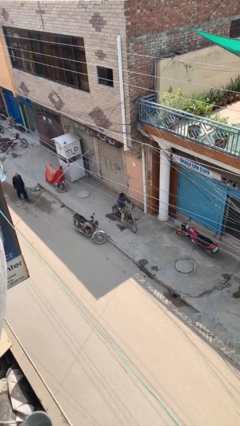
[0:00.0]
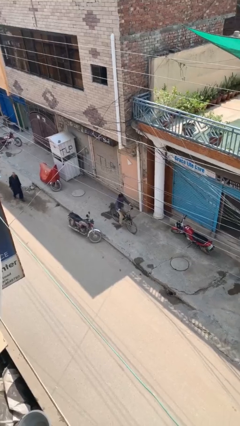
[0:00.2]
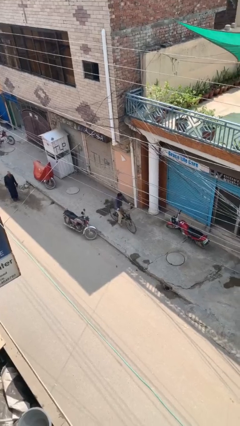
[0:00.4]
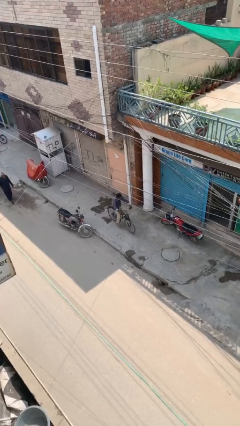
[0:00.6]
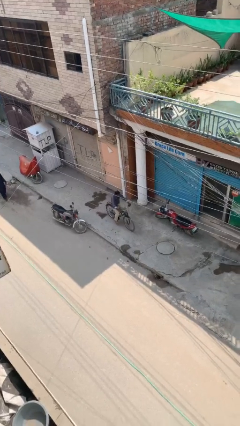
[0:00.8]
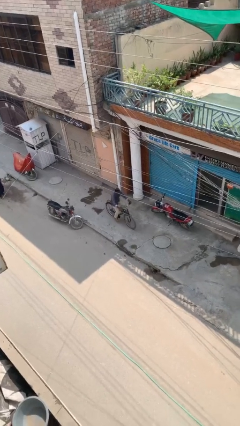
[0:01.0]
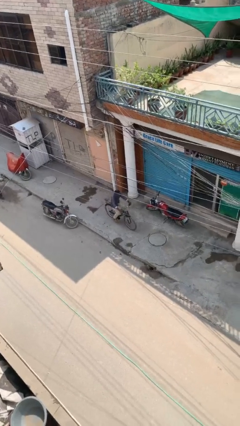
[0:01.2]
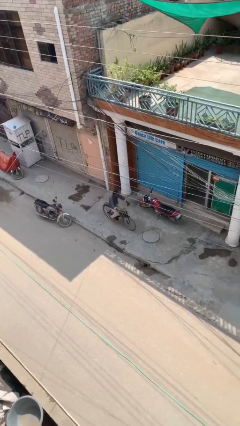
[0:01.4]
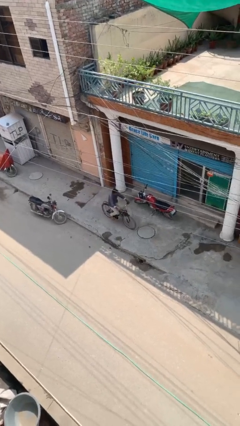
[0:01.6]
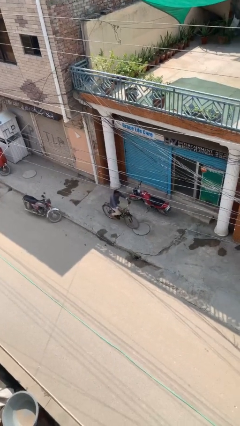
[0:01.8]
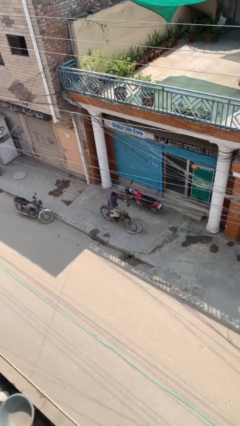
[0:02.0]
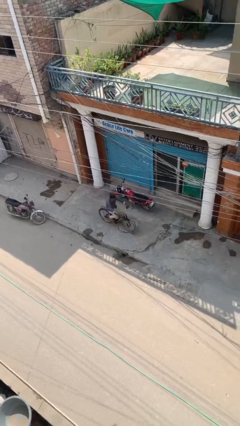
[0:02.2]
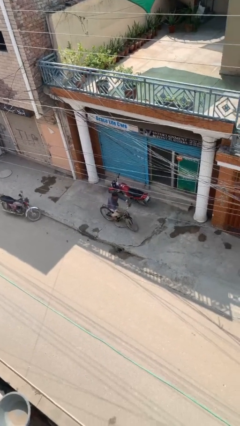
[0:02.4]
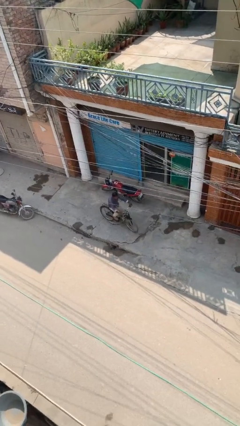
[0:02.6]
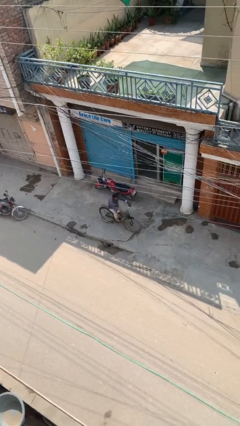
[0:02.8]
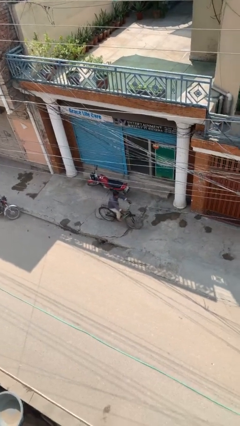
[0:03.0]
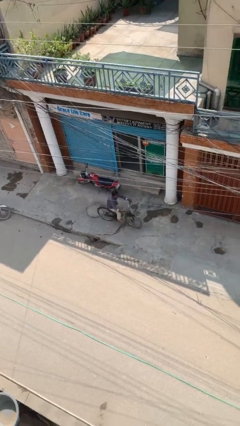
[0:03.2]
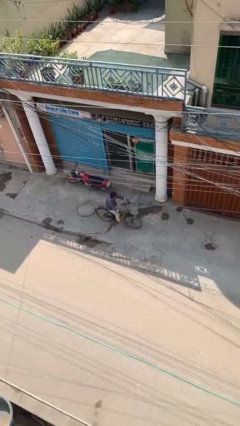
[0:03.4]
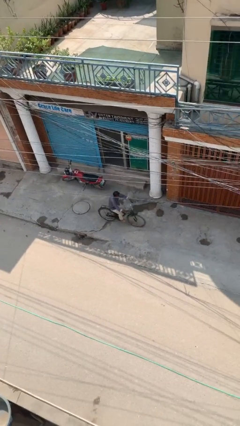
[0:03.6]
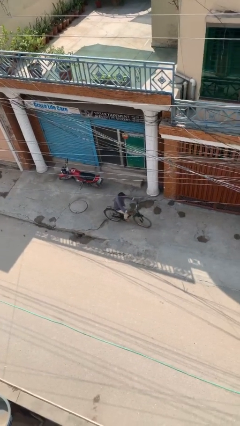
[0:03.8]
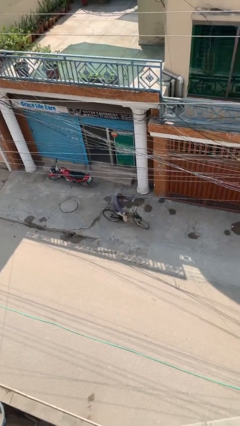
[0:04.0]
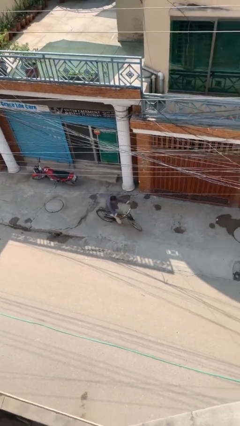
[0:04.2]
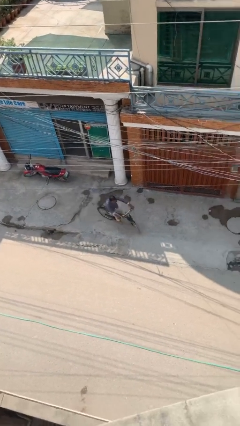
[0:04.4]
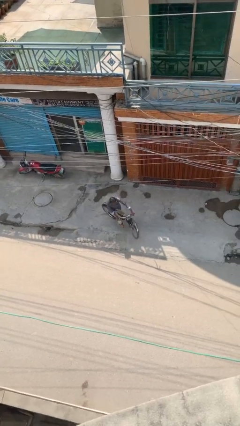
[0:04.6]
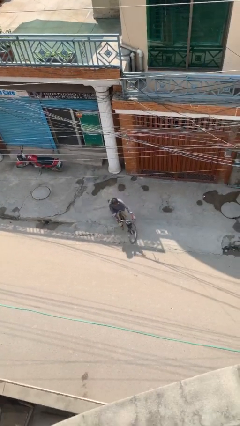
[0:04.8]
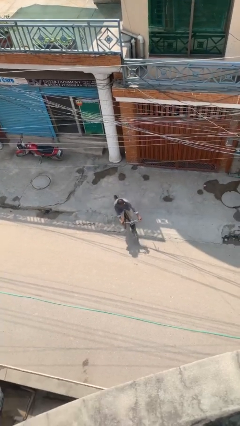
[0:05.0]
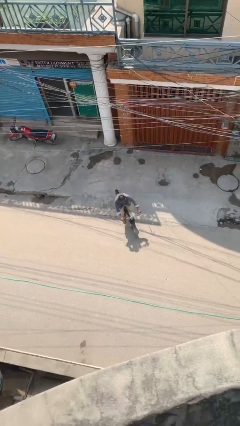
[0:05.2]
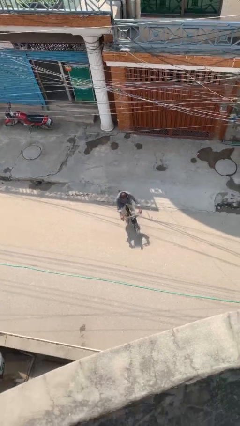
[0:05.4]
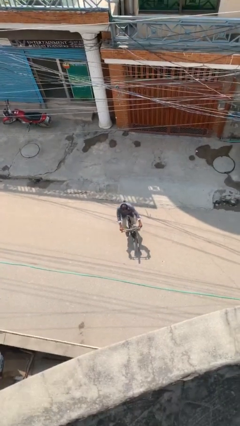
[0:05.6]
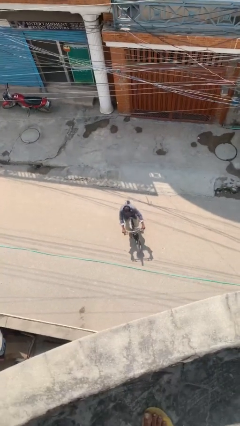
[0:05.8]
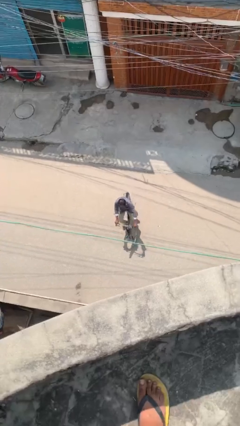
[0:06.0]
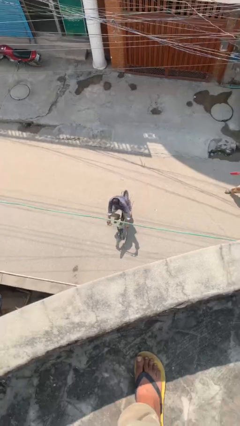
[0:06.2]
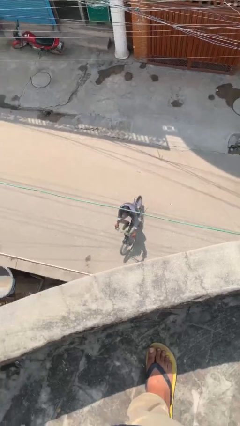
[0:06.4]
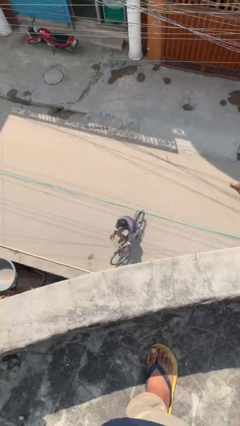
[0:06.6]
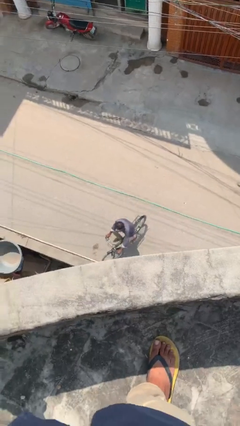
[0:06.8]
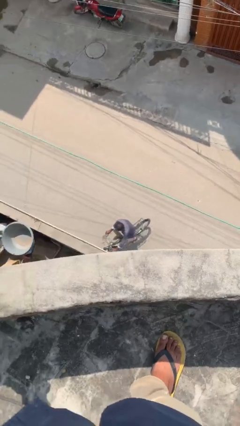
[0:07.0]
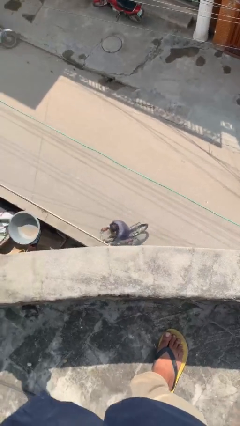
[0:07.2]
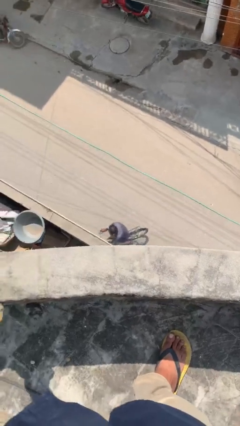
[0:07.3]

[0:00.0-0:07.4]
person rides bicycle

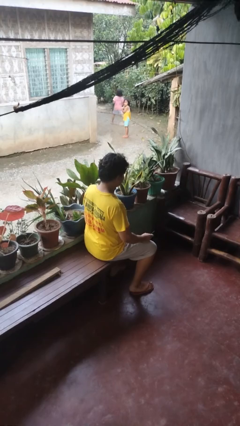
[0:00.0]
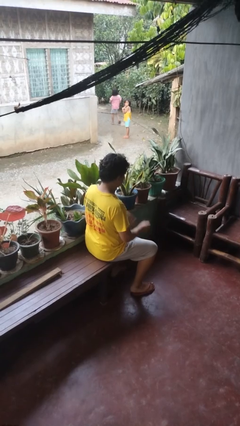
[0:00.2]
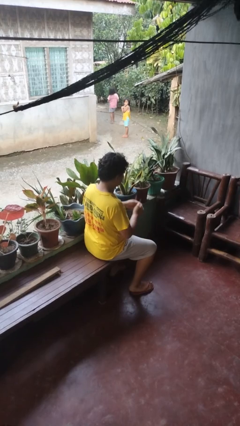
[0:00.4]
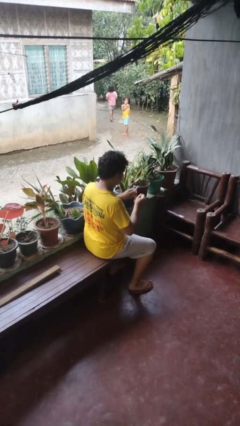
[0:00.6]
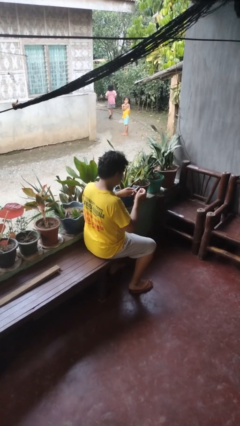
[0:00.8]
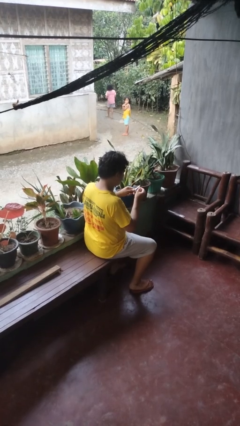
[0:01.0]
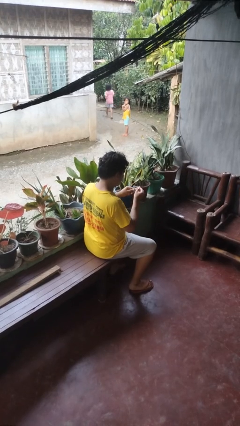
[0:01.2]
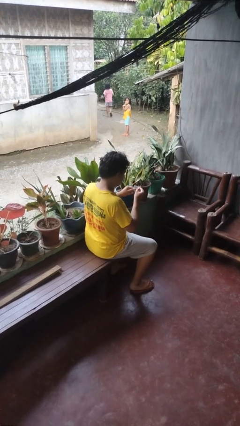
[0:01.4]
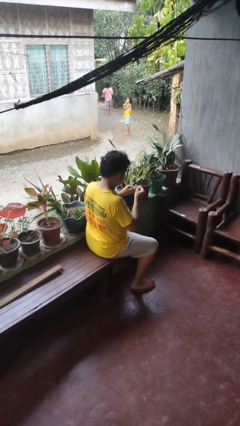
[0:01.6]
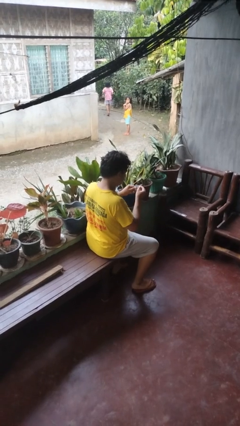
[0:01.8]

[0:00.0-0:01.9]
person files fingernails

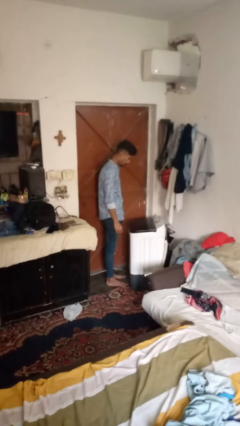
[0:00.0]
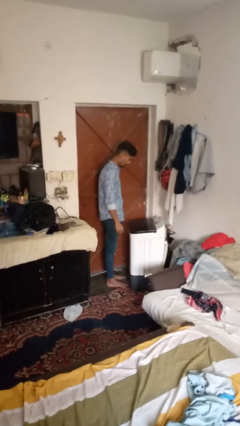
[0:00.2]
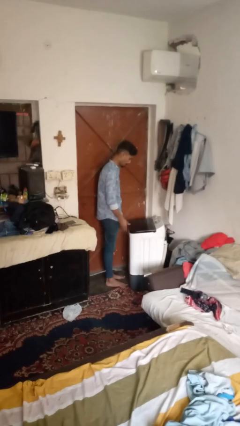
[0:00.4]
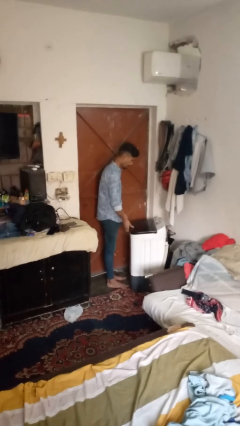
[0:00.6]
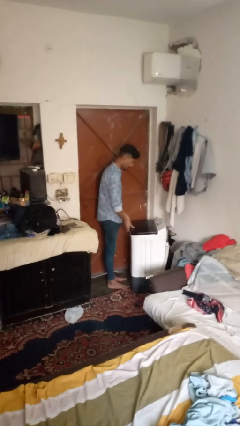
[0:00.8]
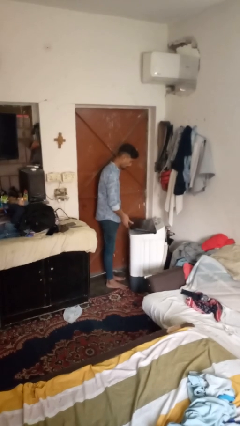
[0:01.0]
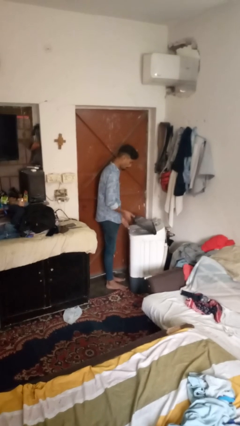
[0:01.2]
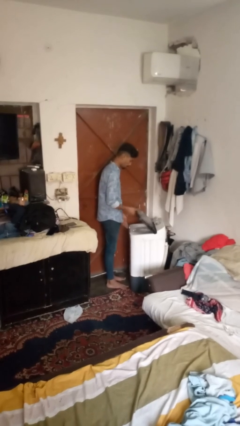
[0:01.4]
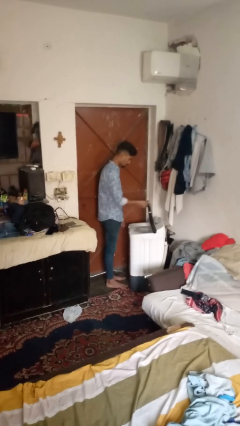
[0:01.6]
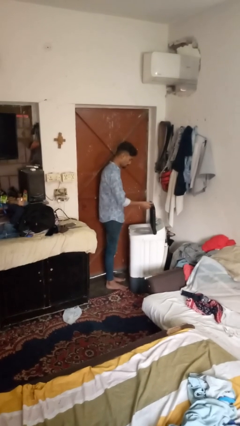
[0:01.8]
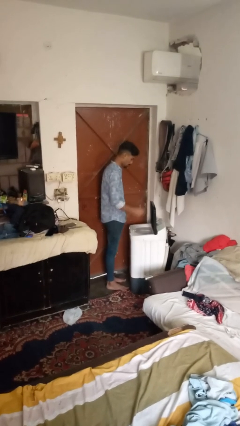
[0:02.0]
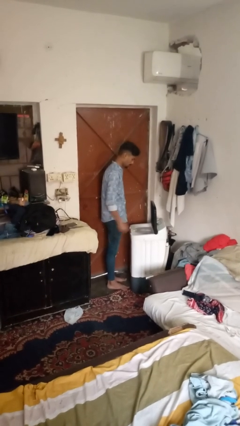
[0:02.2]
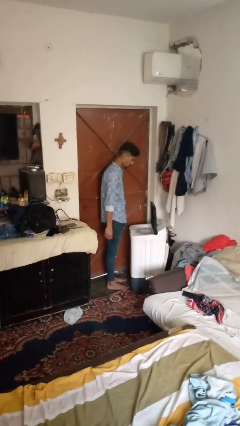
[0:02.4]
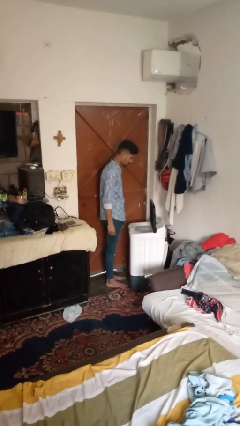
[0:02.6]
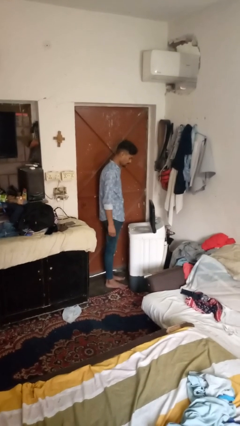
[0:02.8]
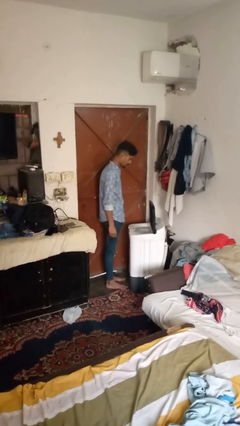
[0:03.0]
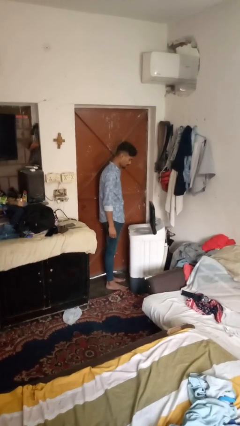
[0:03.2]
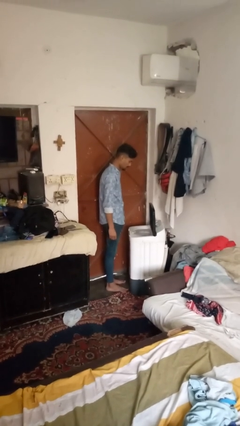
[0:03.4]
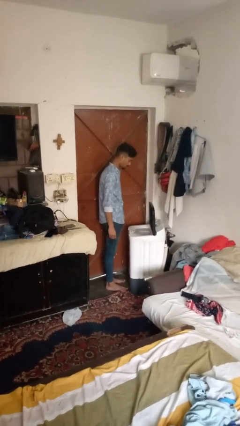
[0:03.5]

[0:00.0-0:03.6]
person opens clothes washer

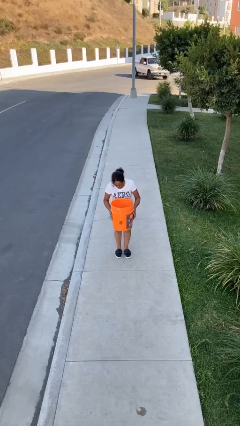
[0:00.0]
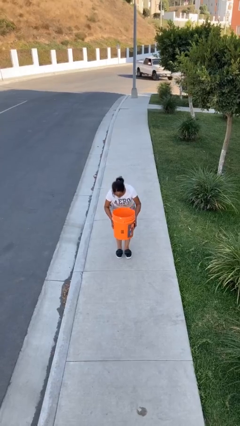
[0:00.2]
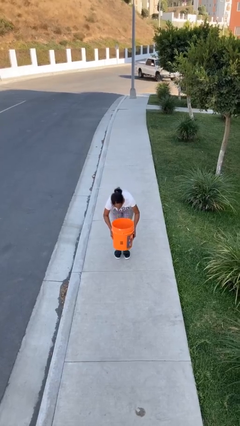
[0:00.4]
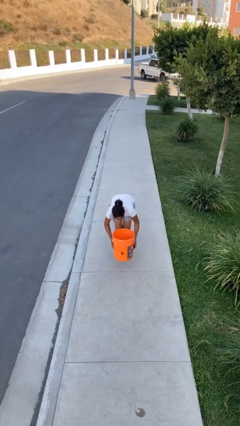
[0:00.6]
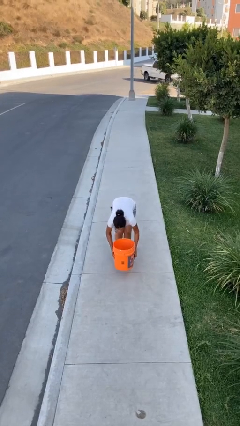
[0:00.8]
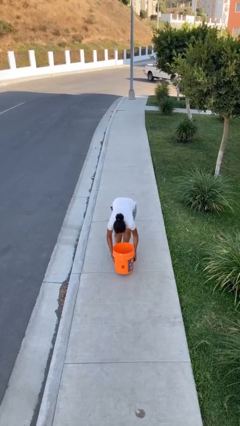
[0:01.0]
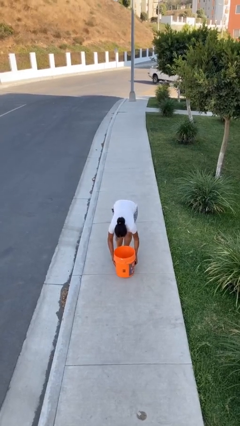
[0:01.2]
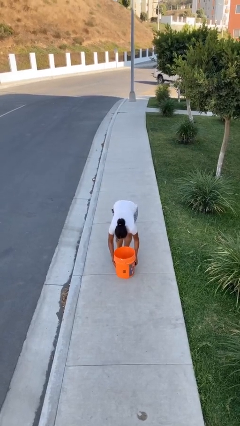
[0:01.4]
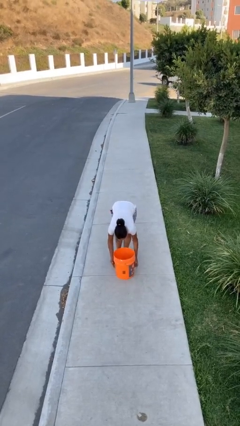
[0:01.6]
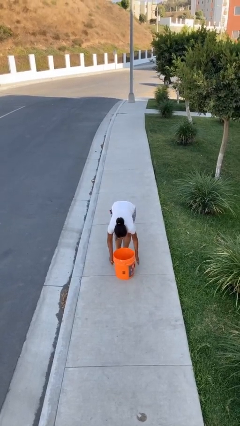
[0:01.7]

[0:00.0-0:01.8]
person puts down object on floor

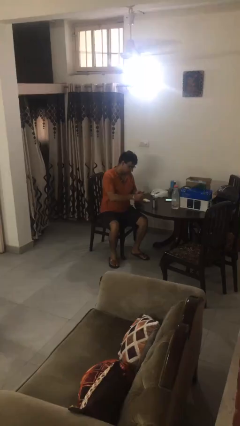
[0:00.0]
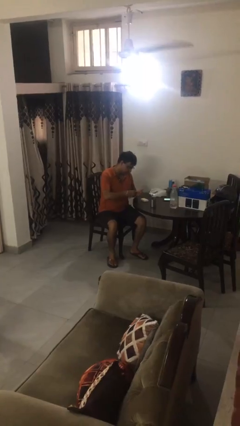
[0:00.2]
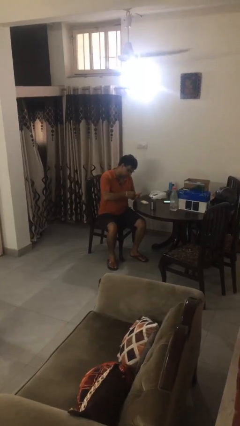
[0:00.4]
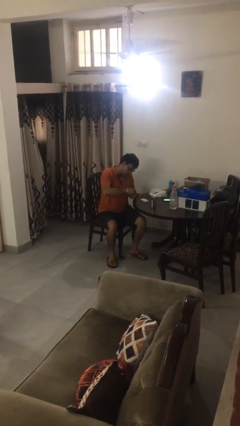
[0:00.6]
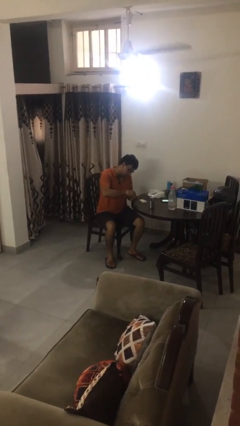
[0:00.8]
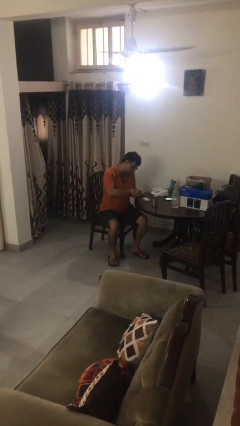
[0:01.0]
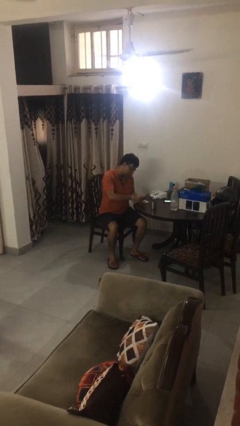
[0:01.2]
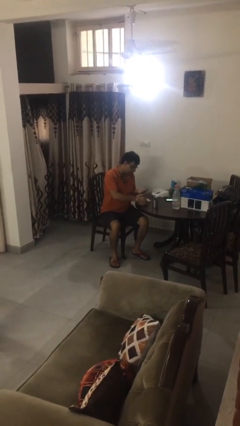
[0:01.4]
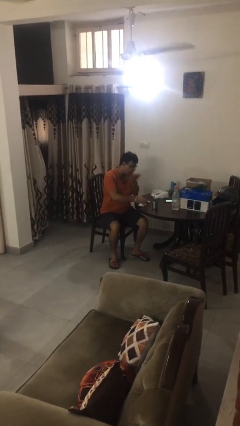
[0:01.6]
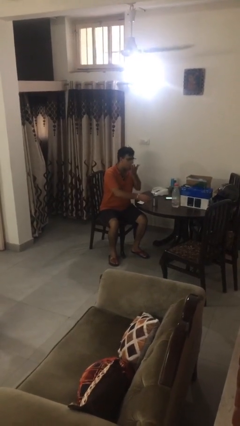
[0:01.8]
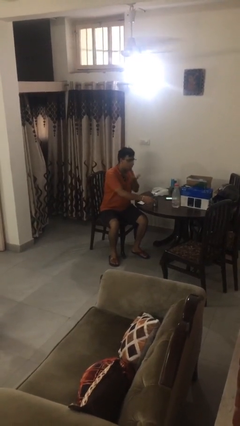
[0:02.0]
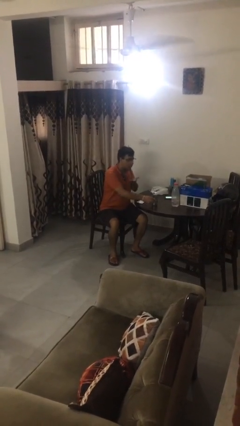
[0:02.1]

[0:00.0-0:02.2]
person takes medicine pills

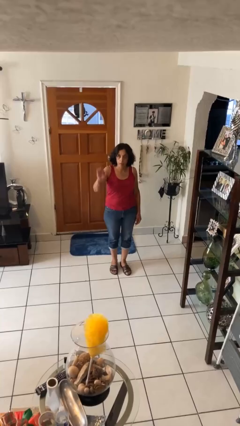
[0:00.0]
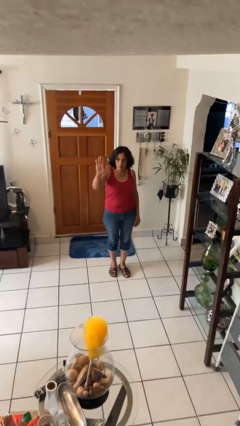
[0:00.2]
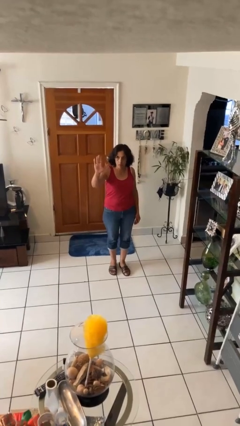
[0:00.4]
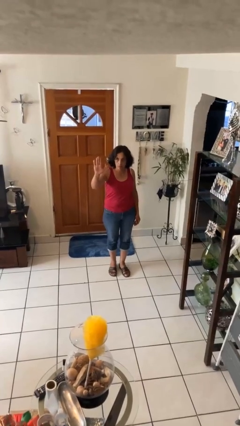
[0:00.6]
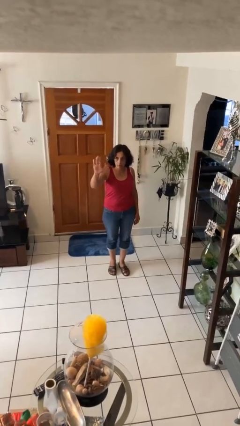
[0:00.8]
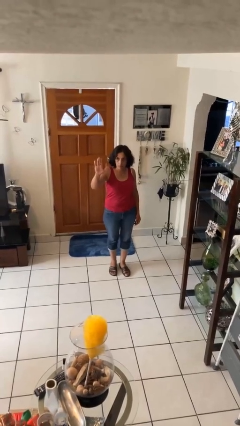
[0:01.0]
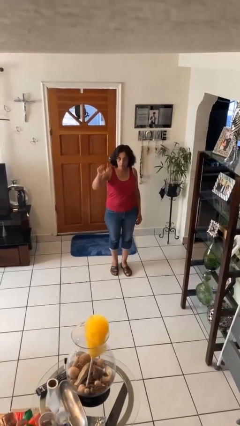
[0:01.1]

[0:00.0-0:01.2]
person gestures stop
